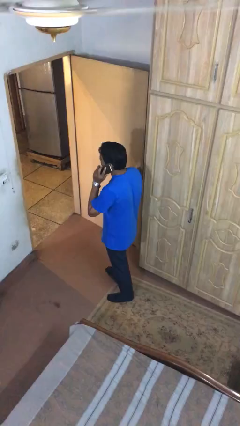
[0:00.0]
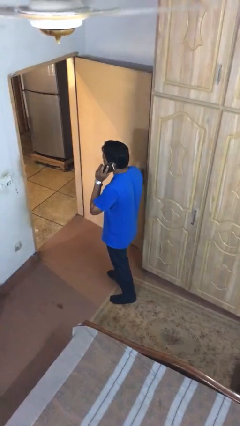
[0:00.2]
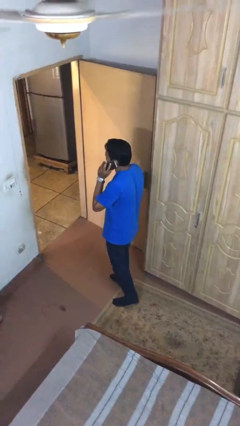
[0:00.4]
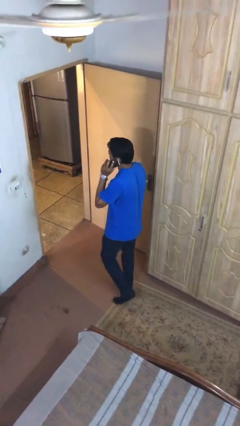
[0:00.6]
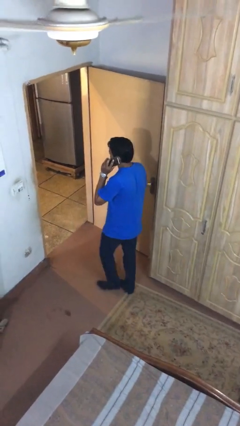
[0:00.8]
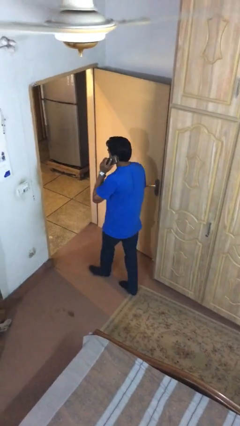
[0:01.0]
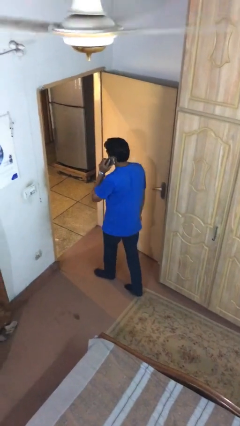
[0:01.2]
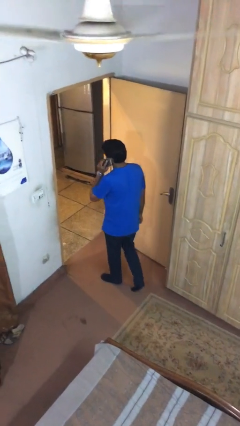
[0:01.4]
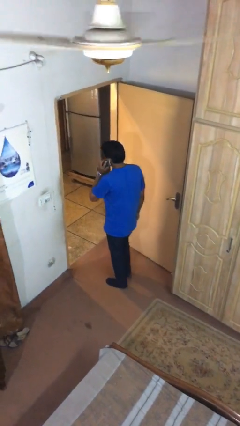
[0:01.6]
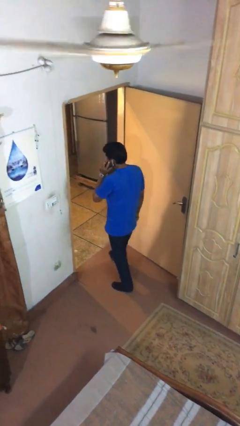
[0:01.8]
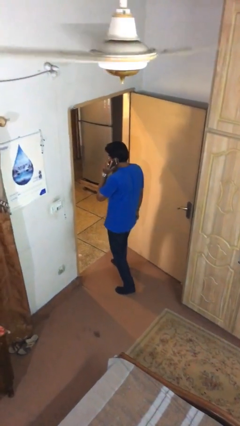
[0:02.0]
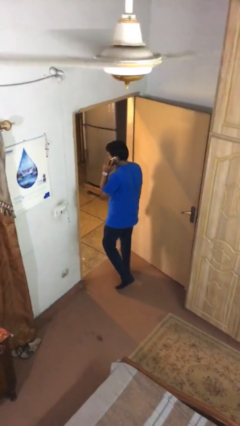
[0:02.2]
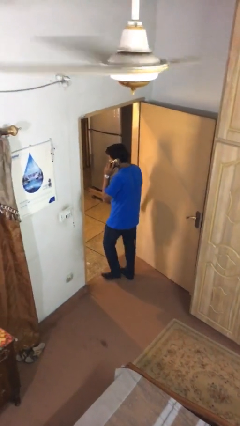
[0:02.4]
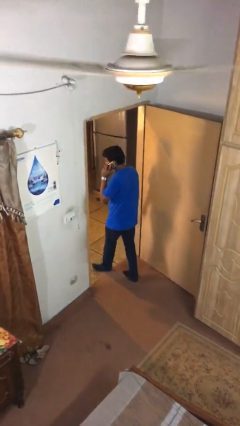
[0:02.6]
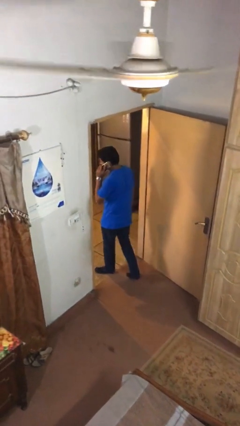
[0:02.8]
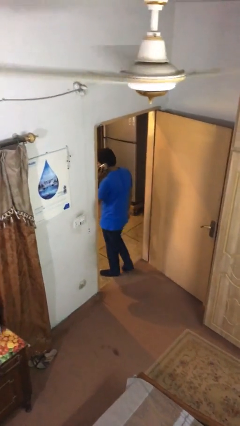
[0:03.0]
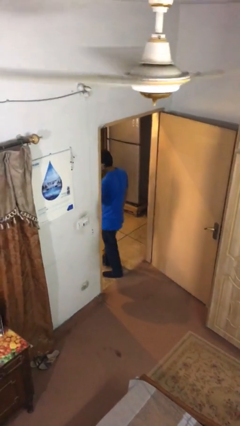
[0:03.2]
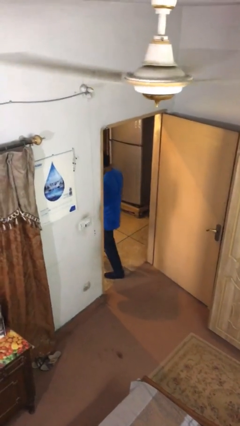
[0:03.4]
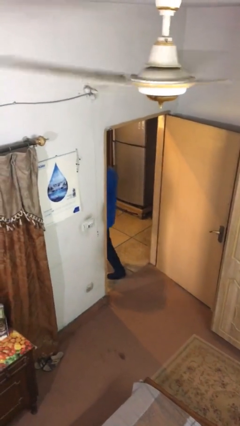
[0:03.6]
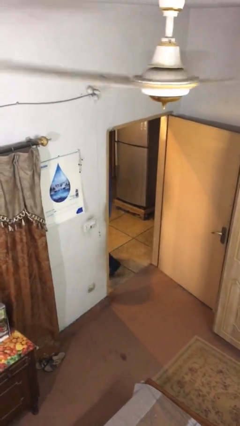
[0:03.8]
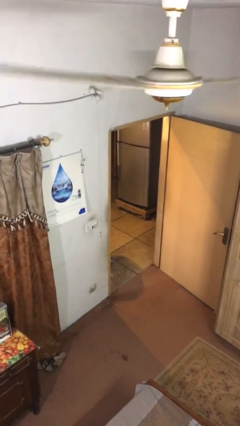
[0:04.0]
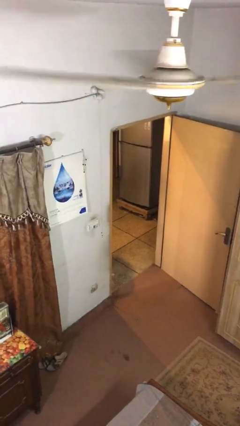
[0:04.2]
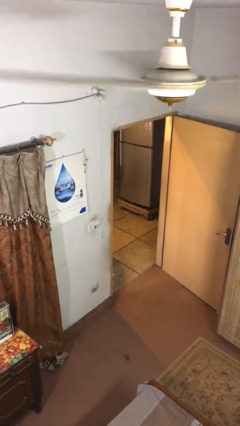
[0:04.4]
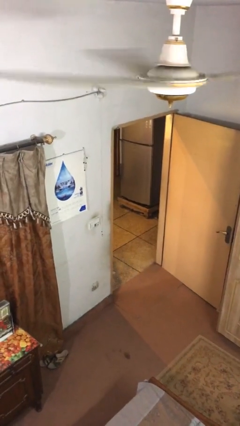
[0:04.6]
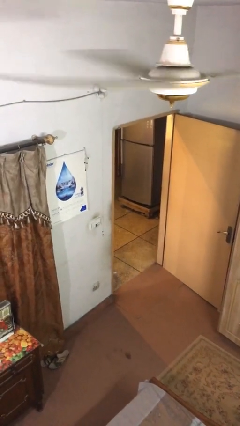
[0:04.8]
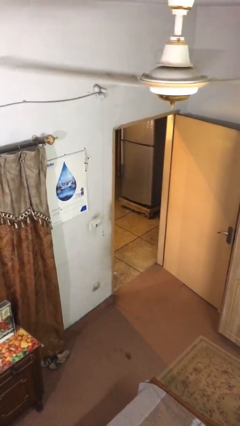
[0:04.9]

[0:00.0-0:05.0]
person exits scene through structure

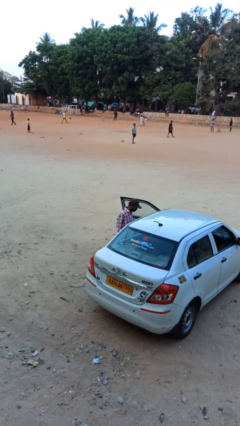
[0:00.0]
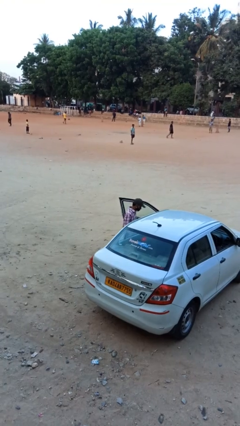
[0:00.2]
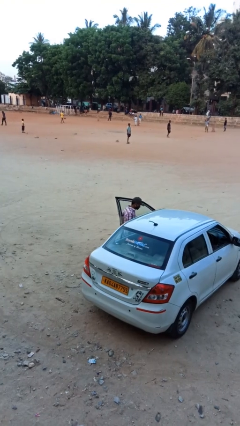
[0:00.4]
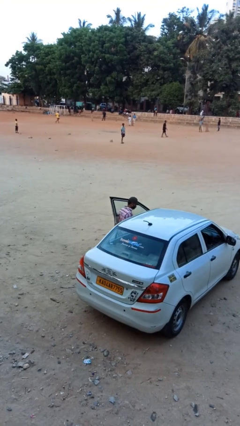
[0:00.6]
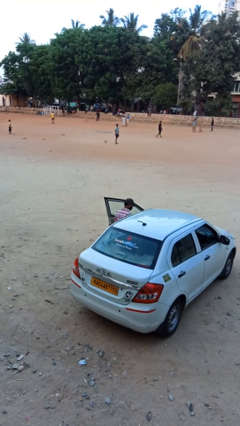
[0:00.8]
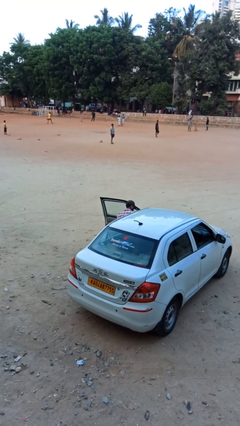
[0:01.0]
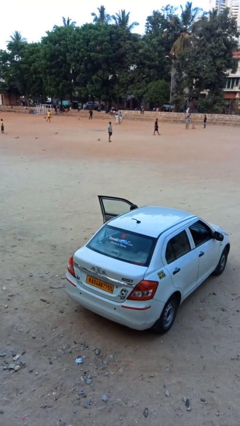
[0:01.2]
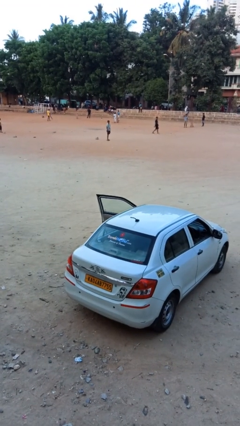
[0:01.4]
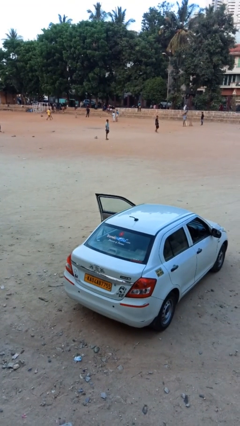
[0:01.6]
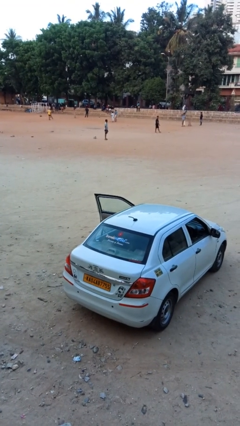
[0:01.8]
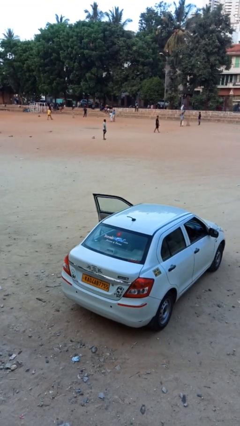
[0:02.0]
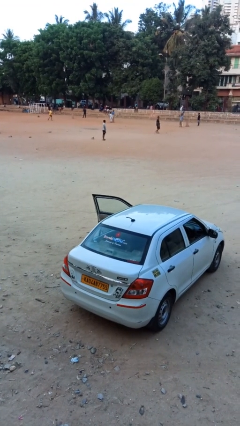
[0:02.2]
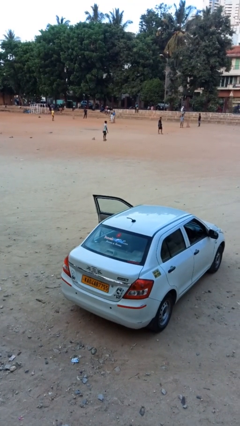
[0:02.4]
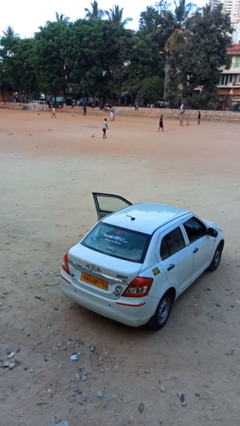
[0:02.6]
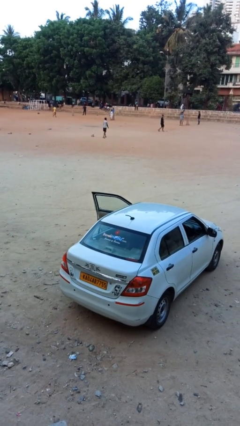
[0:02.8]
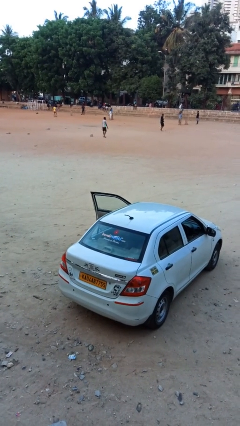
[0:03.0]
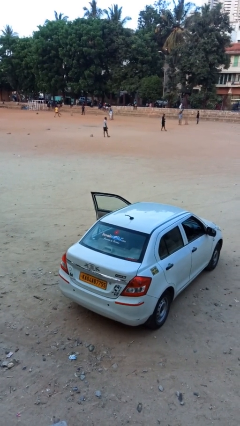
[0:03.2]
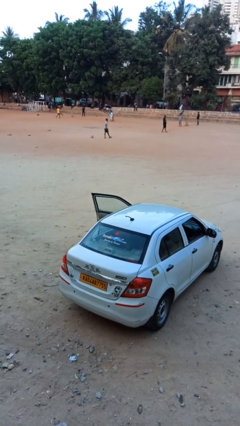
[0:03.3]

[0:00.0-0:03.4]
person enters car

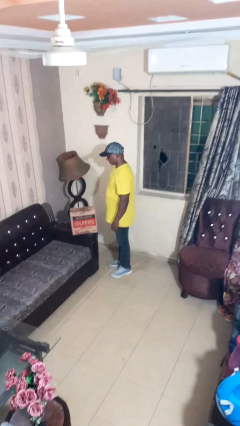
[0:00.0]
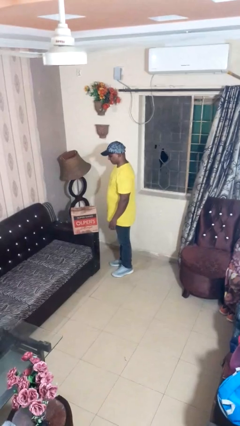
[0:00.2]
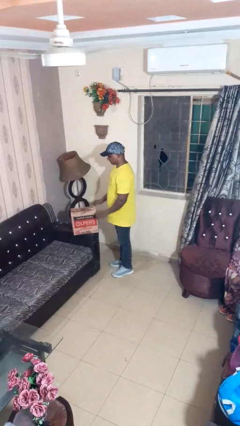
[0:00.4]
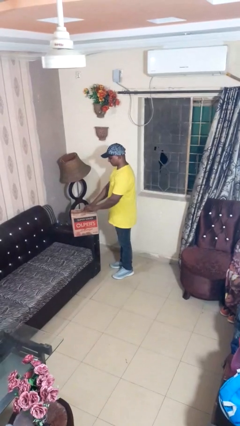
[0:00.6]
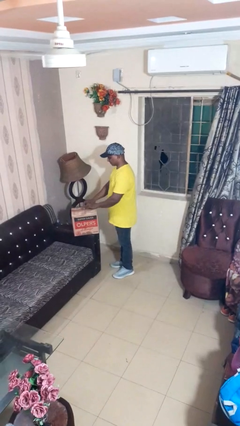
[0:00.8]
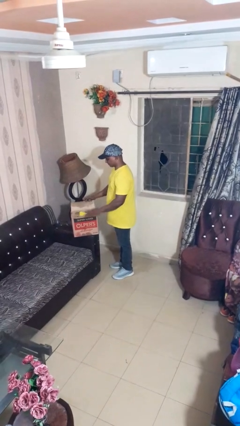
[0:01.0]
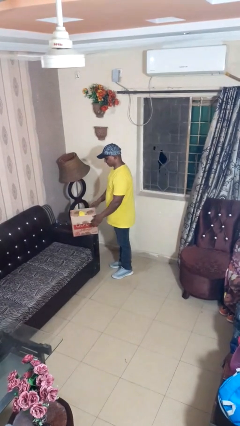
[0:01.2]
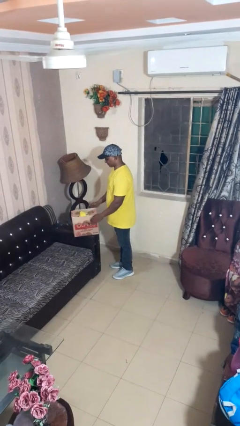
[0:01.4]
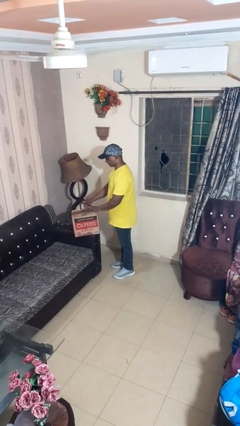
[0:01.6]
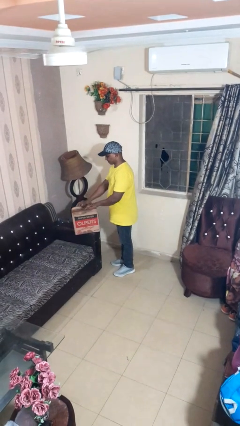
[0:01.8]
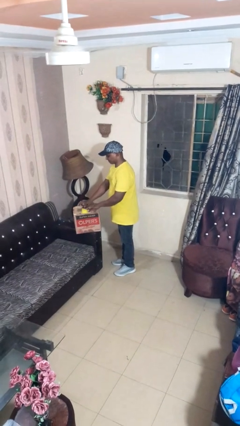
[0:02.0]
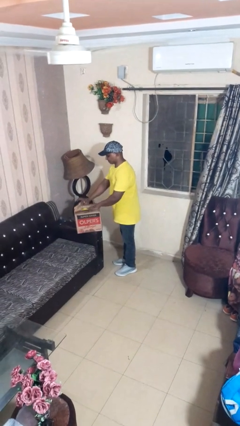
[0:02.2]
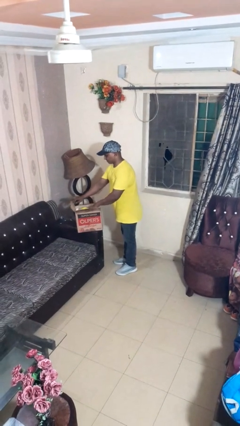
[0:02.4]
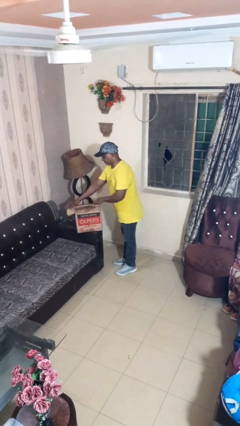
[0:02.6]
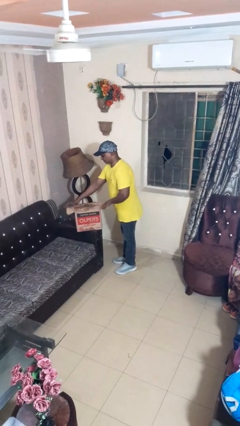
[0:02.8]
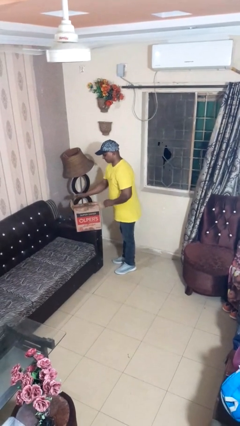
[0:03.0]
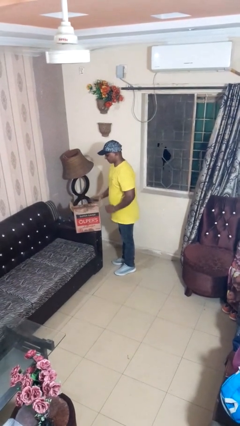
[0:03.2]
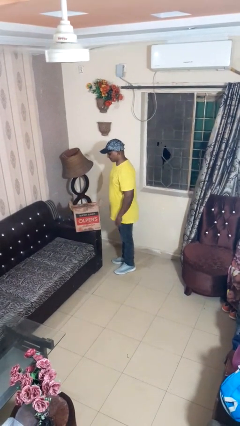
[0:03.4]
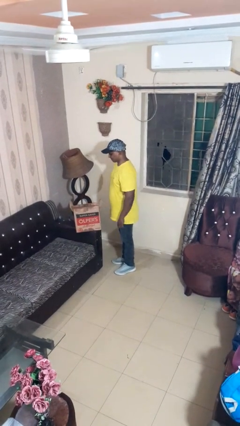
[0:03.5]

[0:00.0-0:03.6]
person opens box

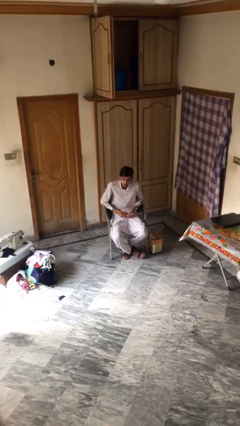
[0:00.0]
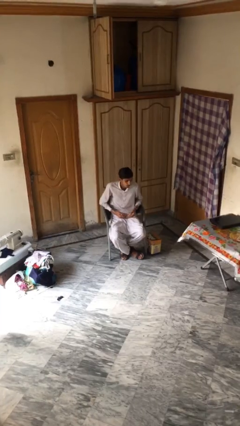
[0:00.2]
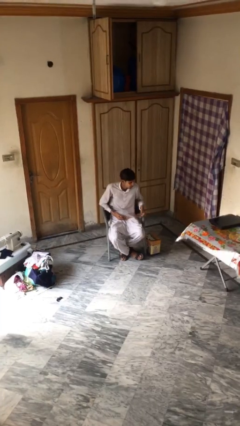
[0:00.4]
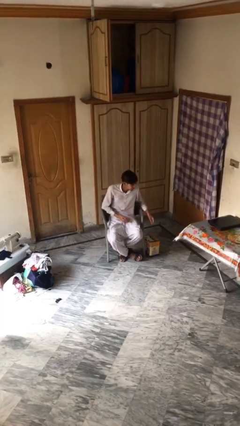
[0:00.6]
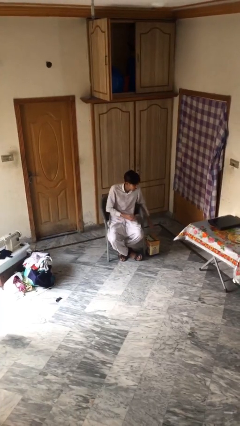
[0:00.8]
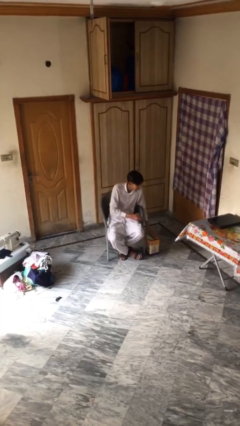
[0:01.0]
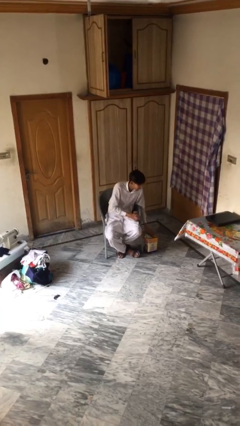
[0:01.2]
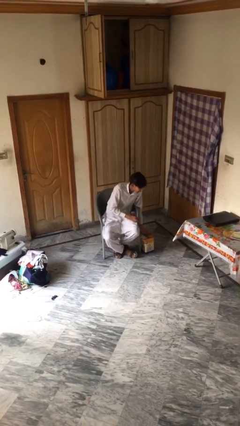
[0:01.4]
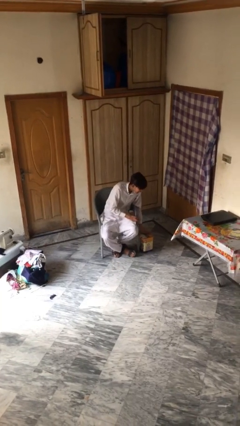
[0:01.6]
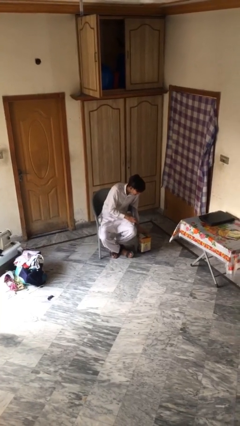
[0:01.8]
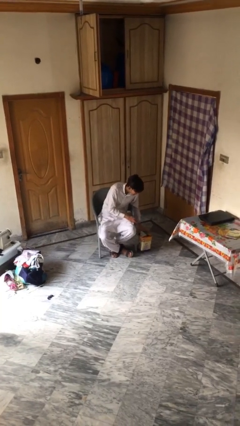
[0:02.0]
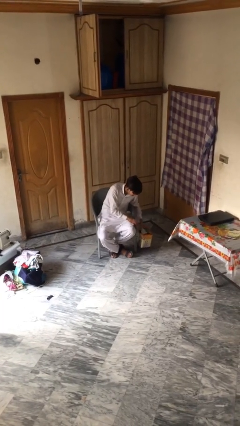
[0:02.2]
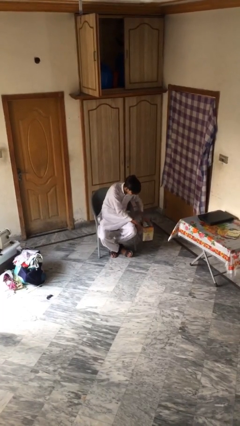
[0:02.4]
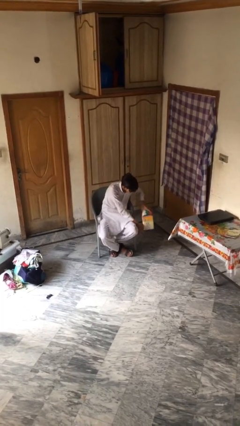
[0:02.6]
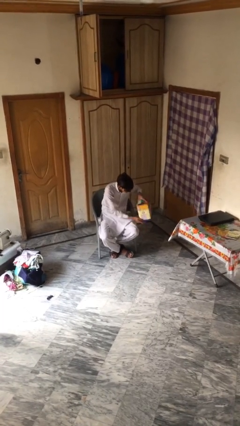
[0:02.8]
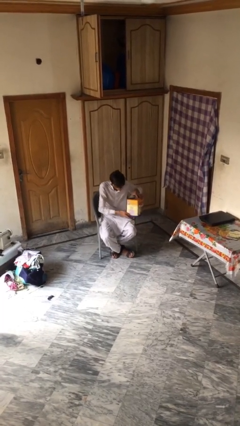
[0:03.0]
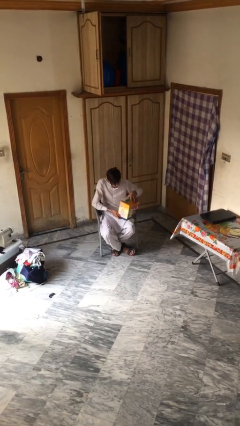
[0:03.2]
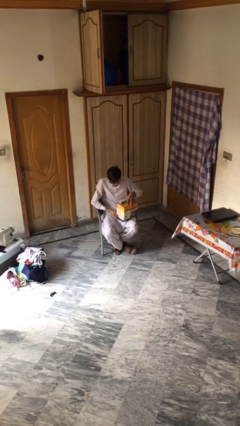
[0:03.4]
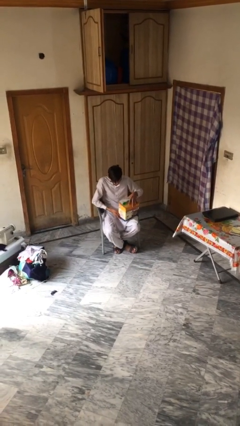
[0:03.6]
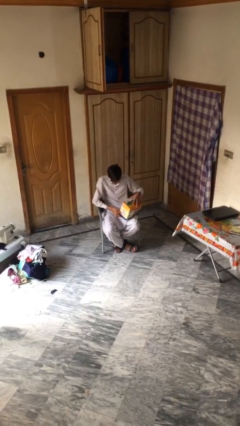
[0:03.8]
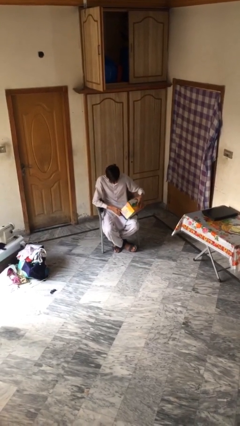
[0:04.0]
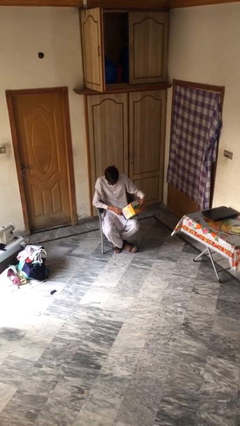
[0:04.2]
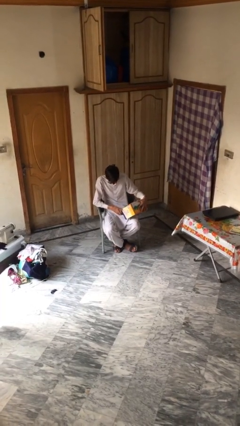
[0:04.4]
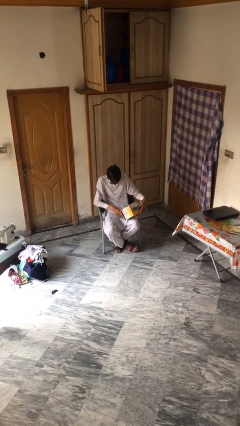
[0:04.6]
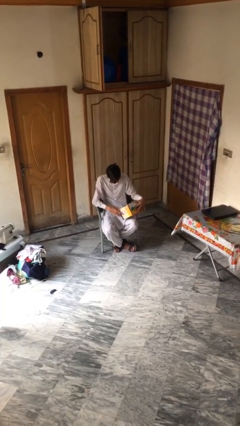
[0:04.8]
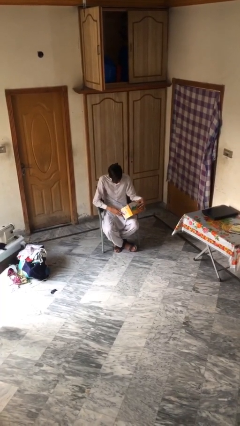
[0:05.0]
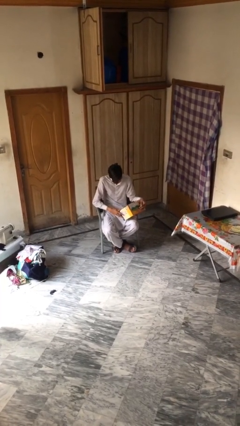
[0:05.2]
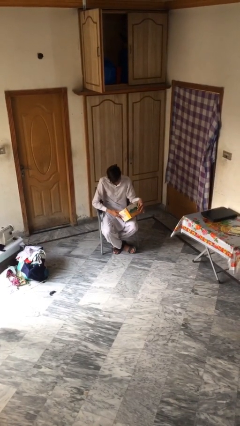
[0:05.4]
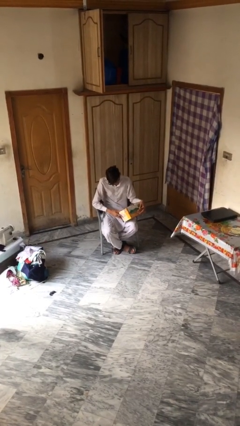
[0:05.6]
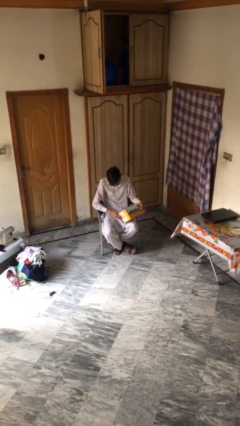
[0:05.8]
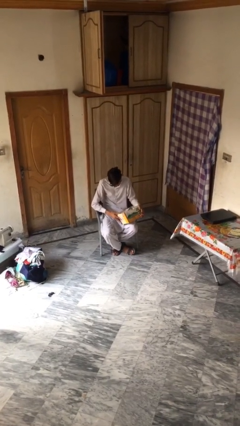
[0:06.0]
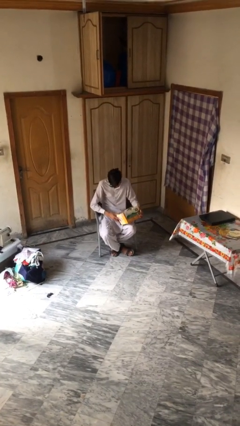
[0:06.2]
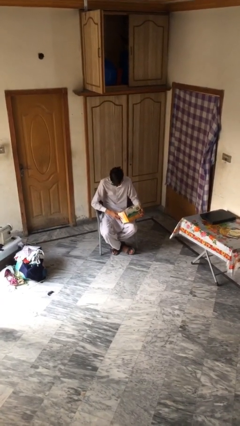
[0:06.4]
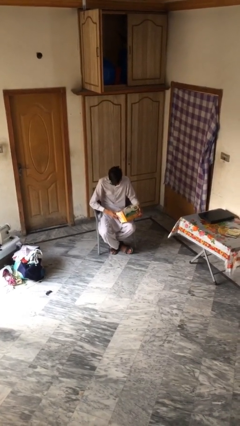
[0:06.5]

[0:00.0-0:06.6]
person picks up object from floor
